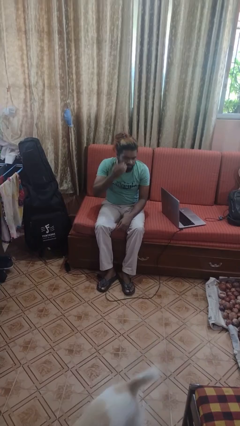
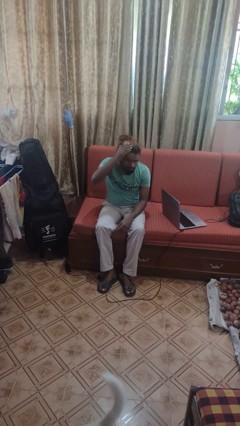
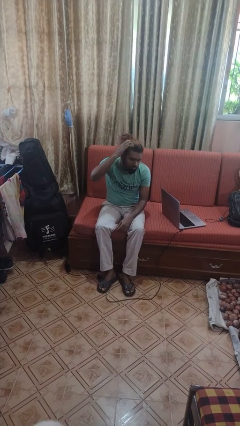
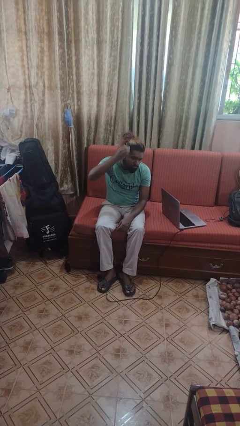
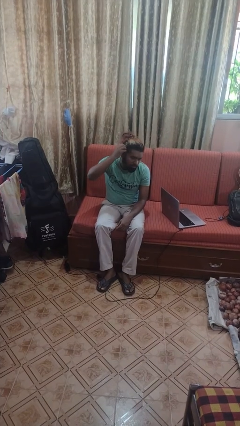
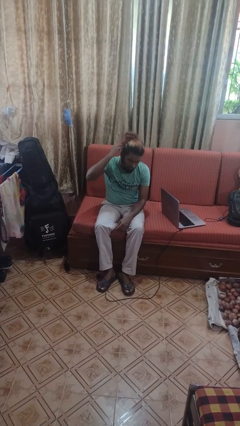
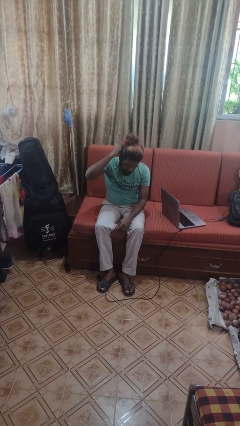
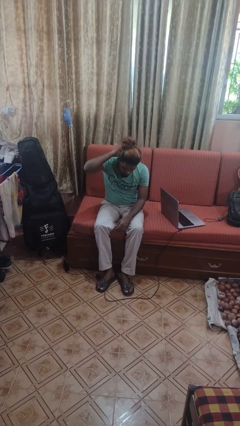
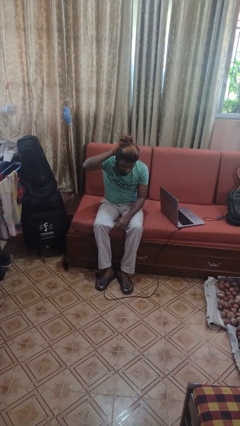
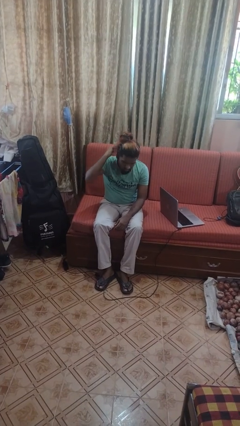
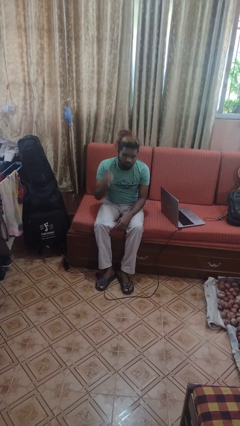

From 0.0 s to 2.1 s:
person strokes hair

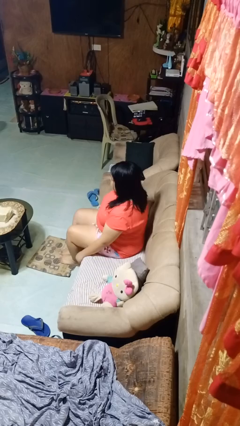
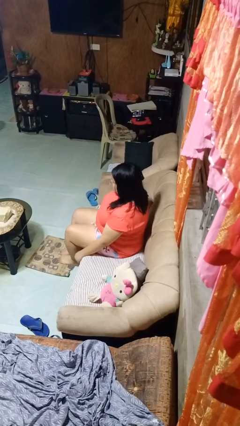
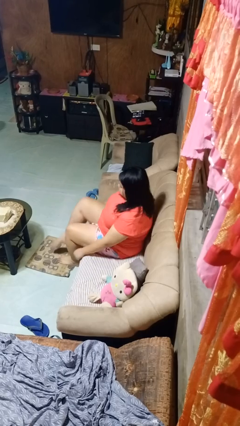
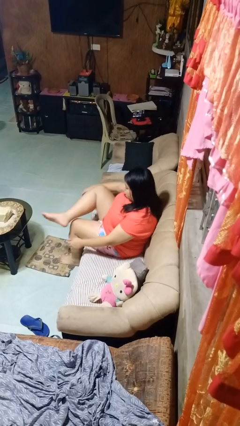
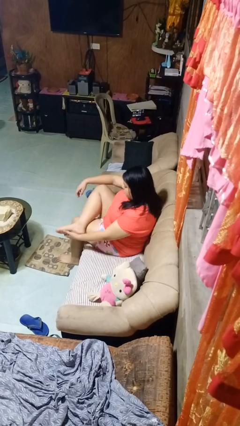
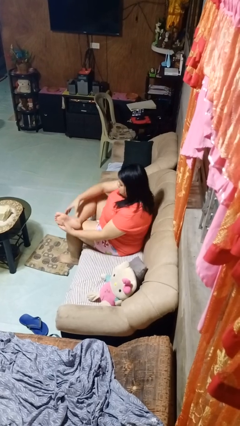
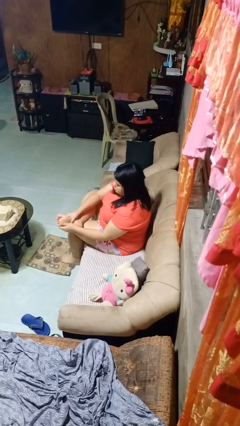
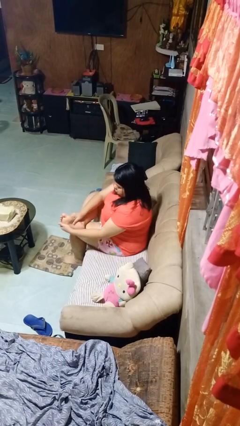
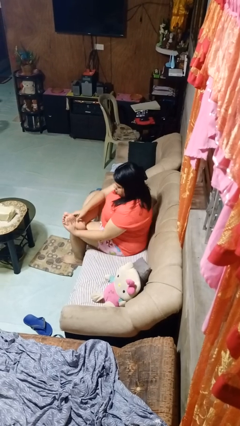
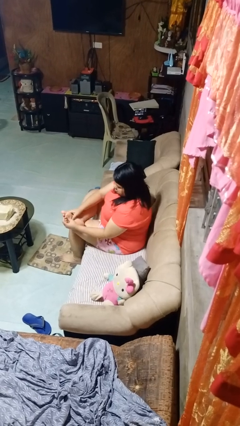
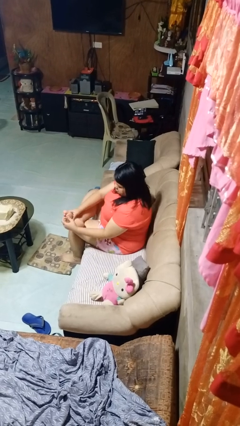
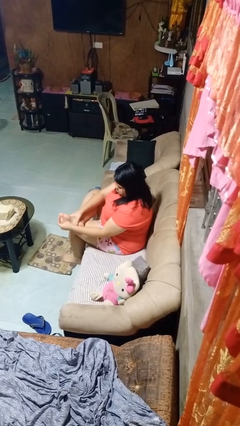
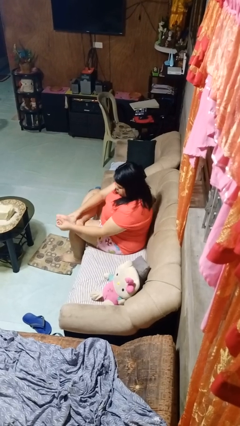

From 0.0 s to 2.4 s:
person rubs foot

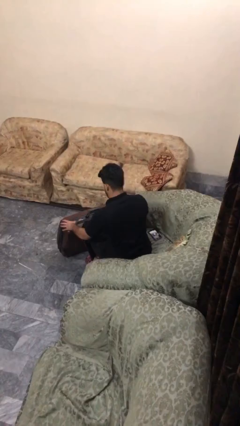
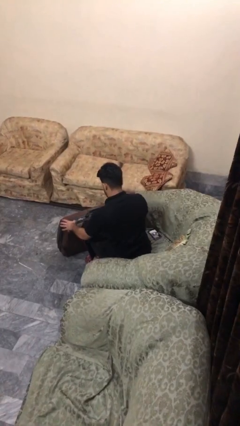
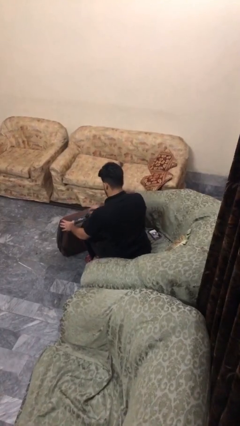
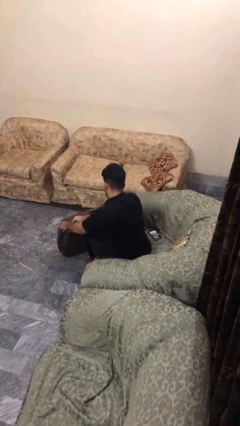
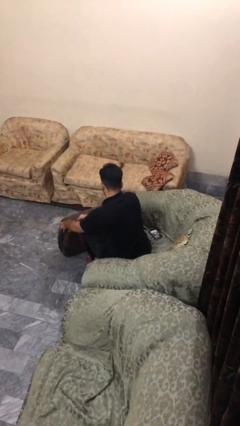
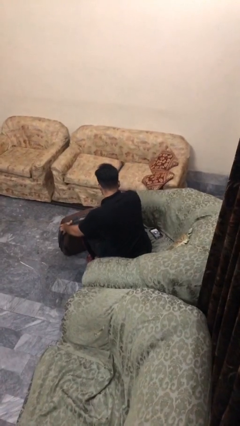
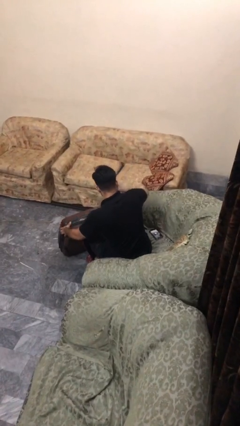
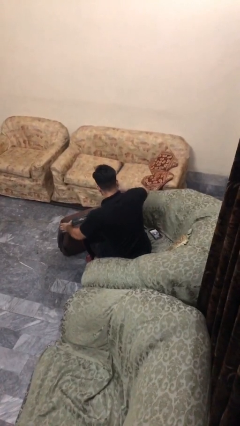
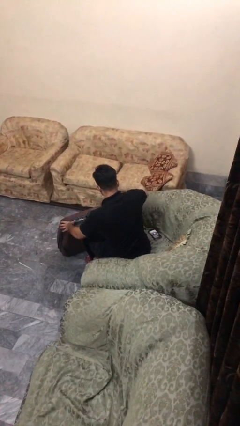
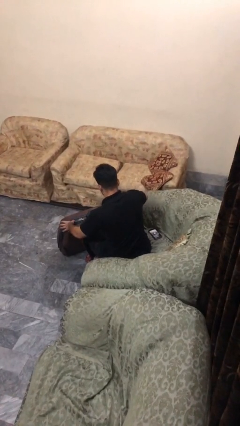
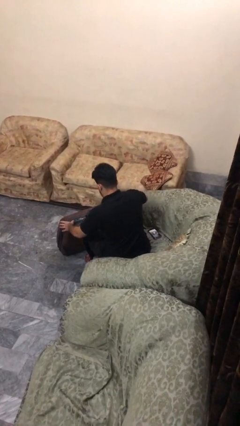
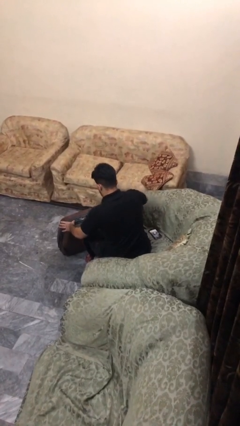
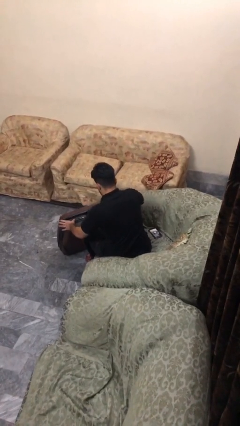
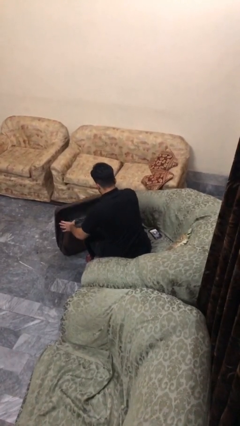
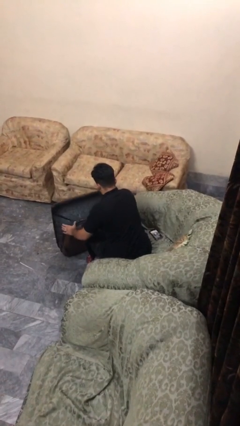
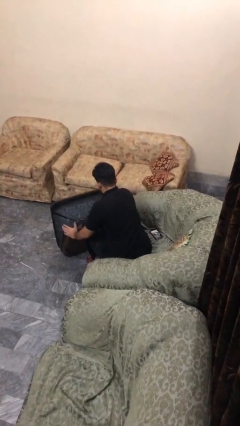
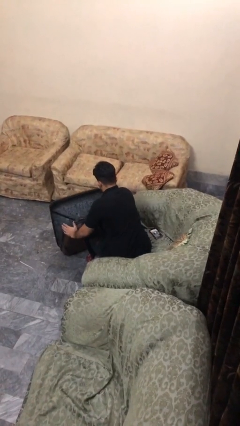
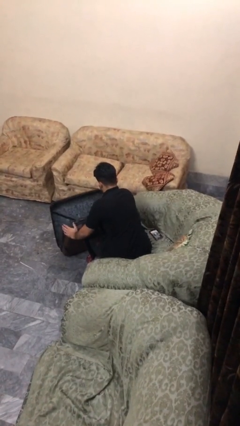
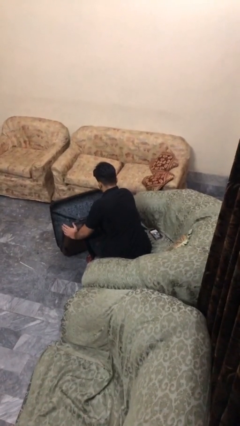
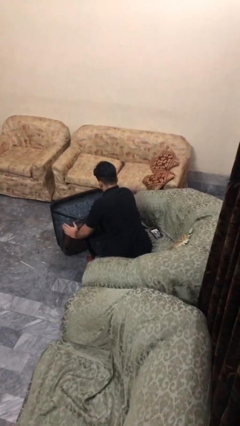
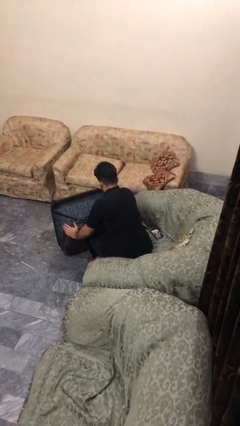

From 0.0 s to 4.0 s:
person opens suitcase

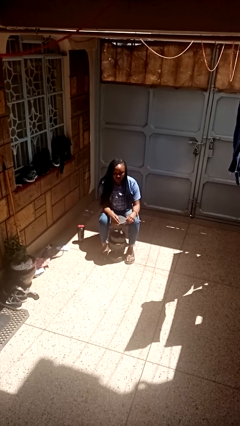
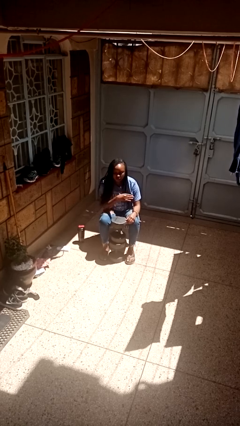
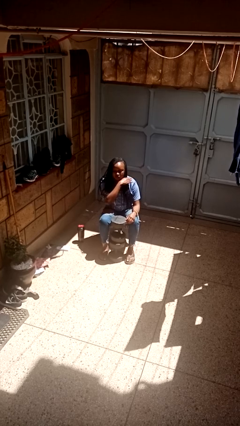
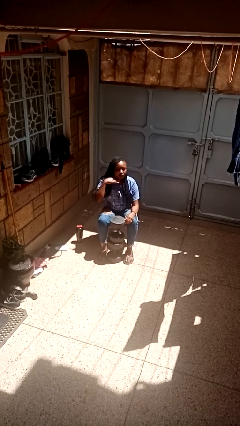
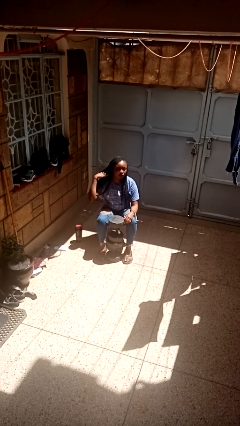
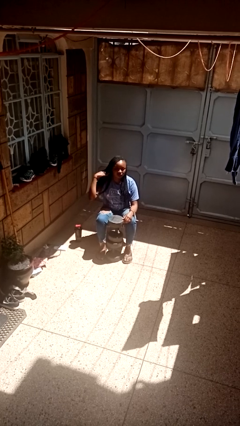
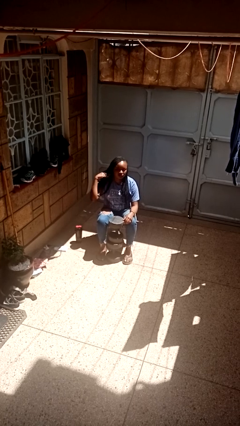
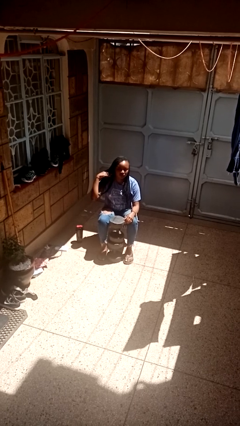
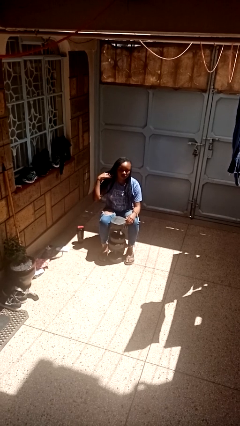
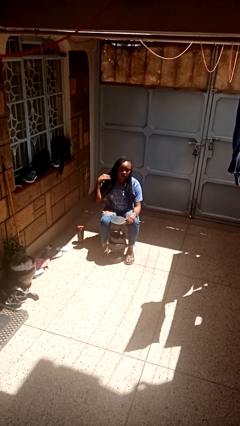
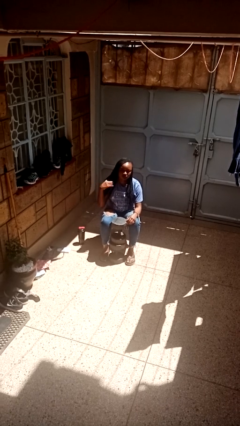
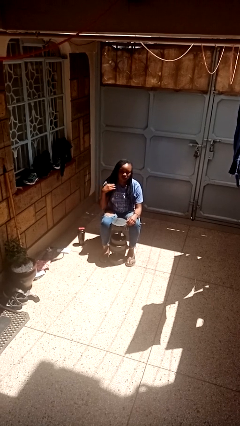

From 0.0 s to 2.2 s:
person gestures cut

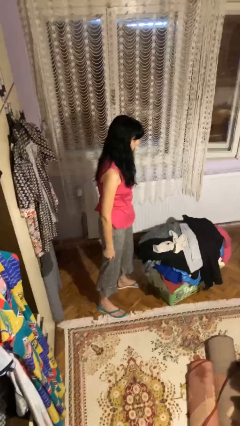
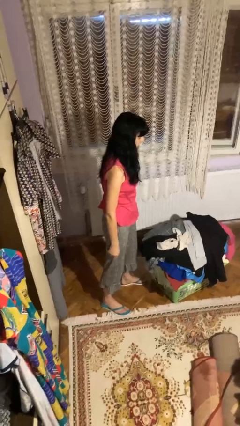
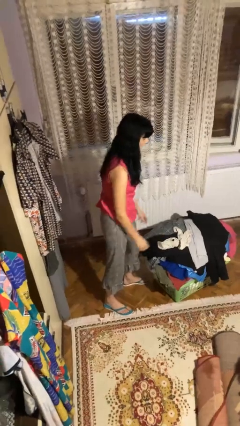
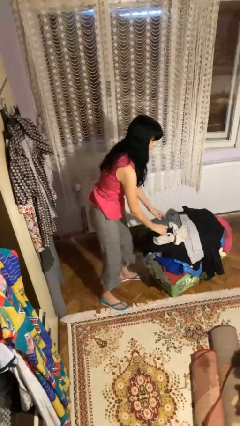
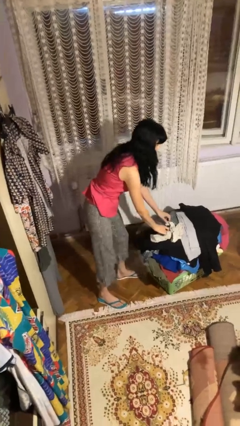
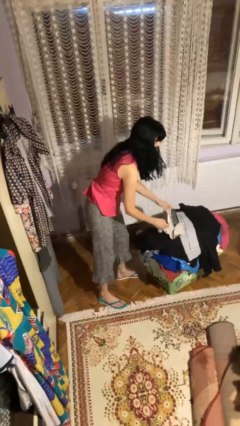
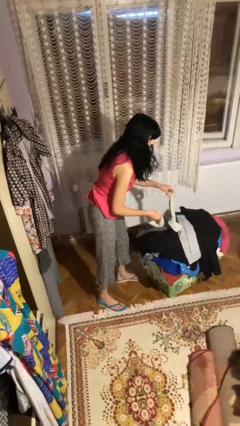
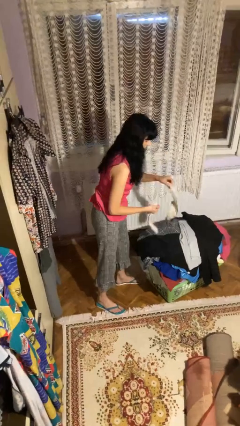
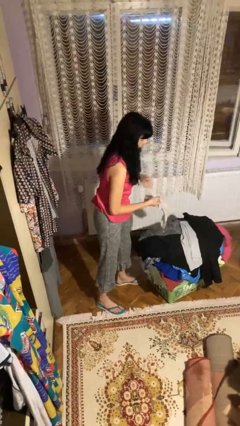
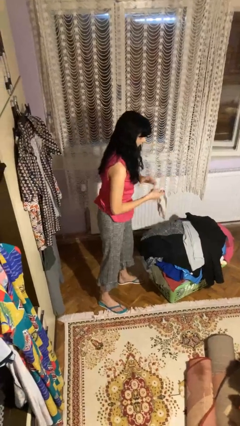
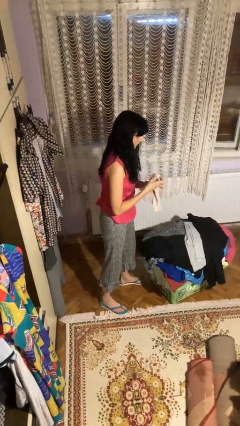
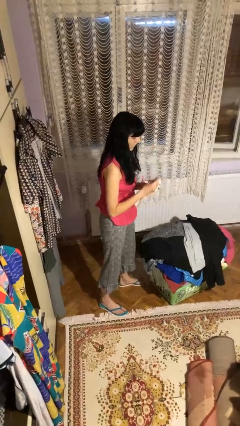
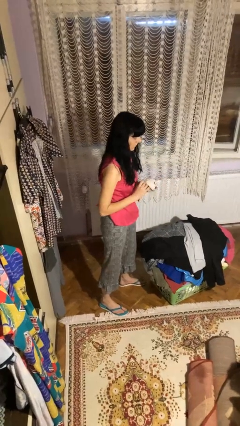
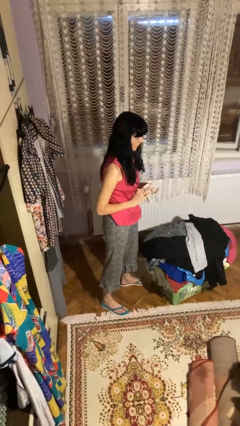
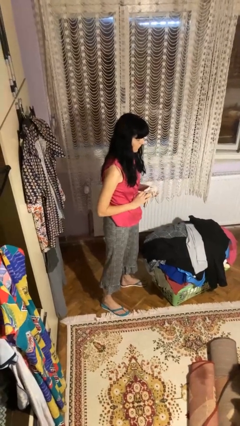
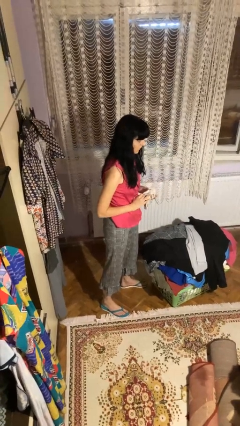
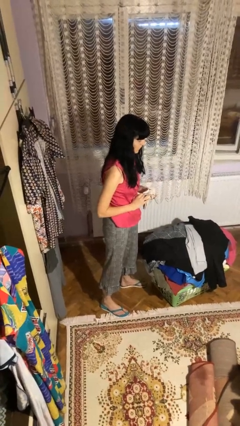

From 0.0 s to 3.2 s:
person folds socks

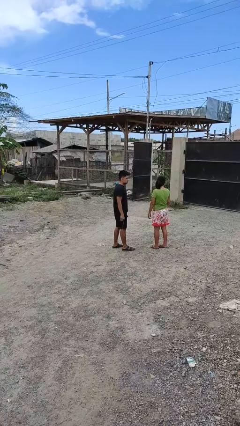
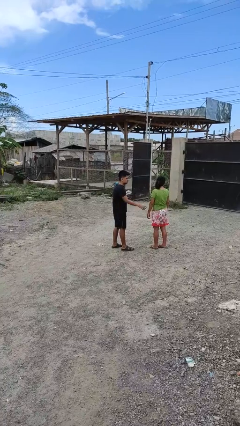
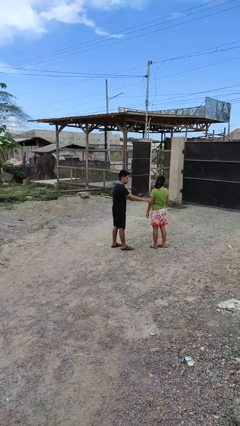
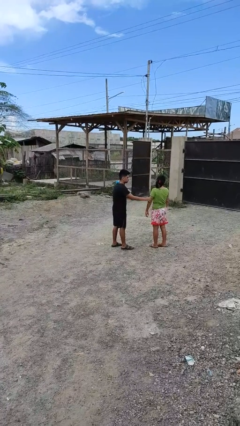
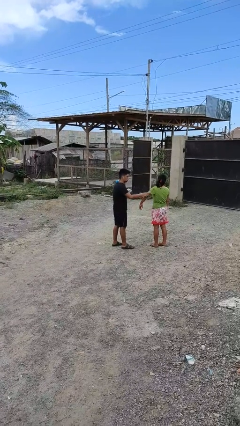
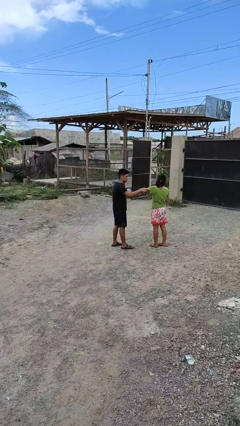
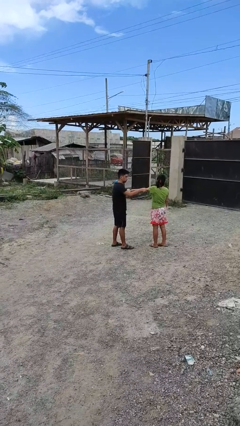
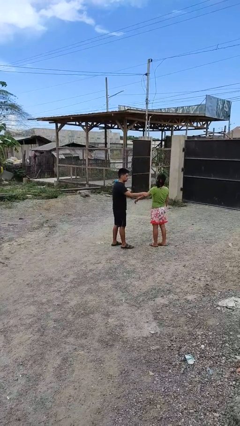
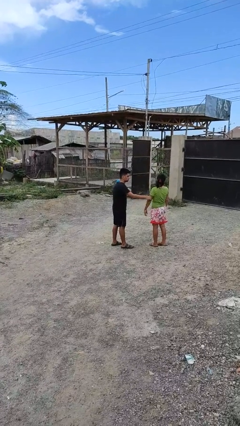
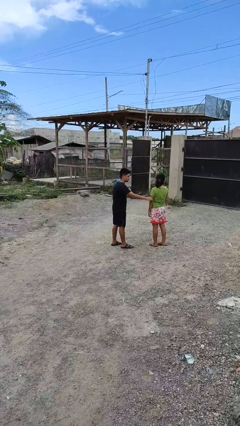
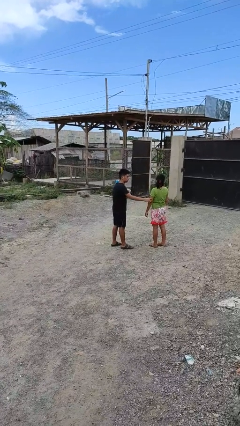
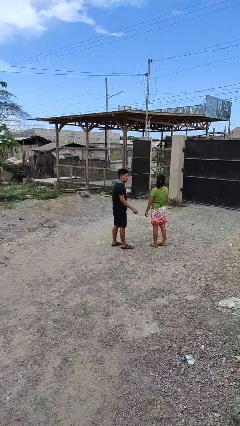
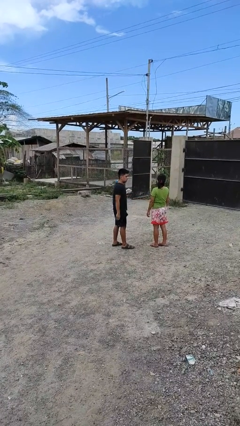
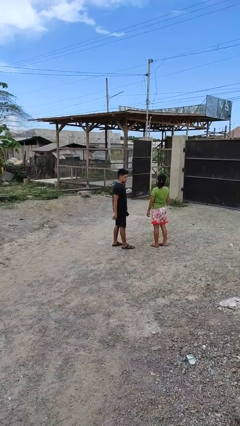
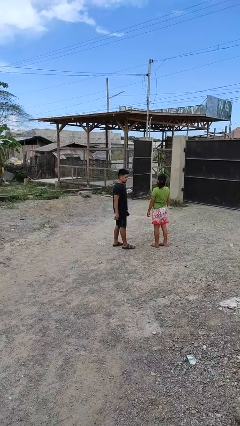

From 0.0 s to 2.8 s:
person grabs person by bicep

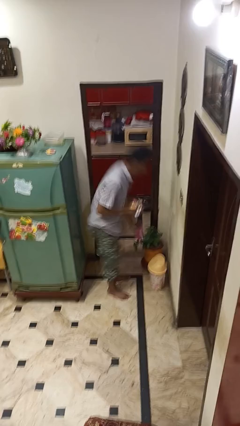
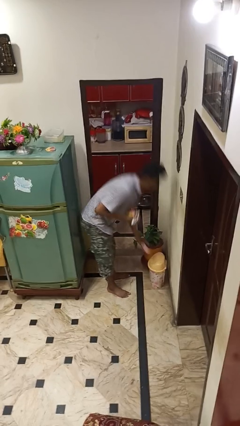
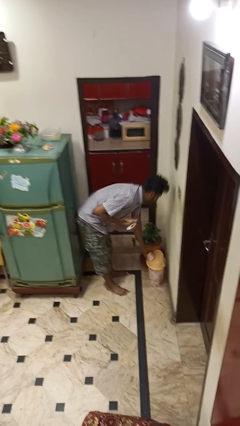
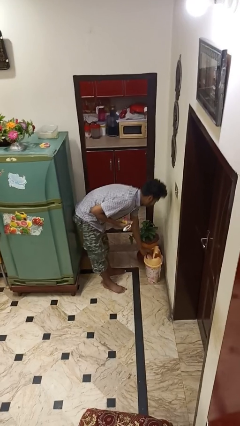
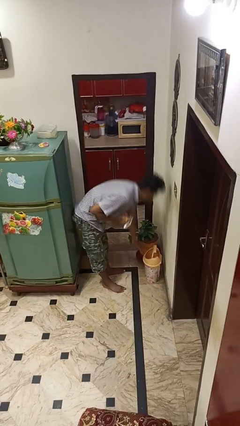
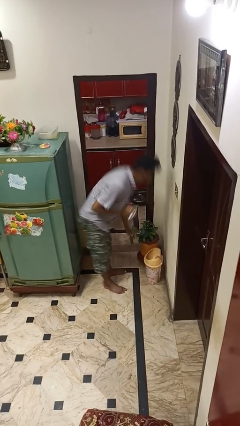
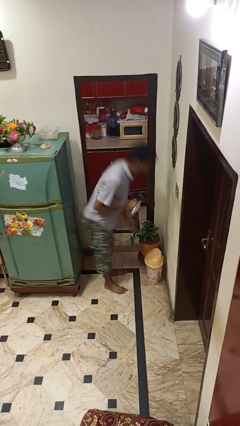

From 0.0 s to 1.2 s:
person discards trash
